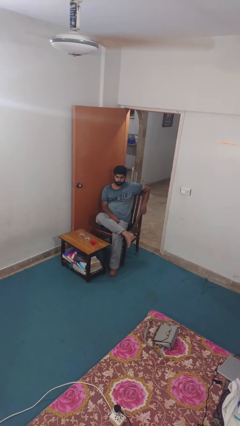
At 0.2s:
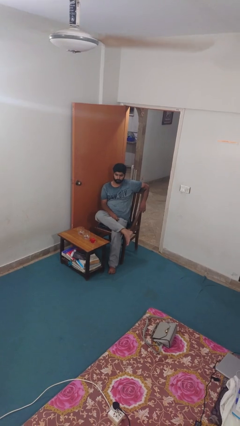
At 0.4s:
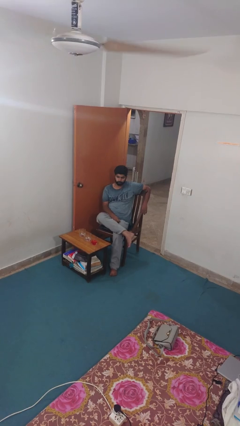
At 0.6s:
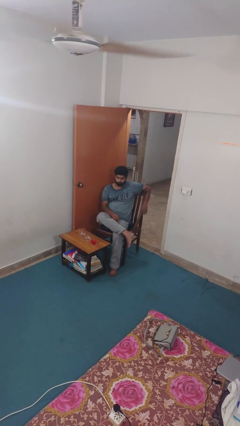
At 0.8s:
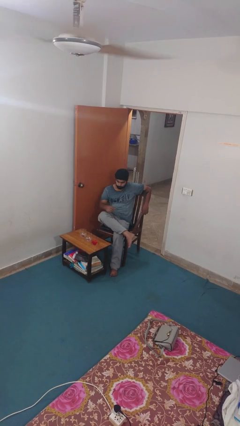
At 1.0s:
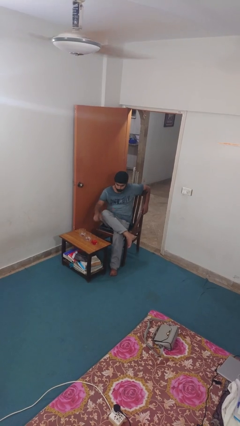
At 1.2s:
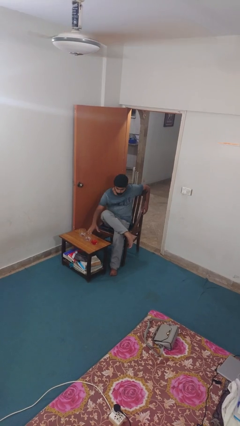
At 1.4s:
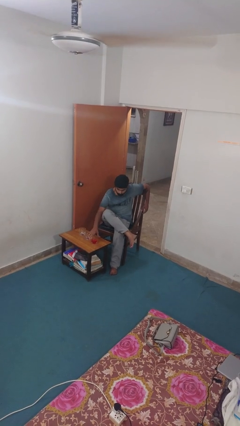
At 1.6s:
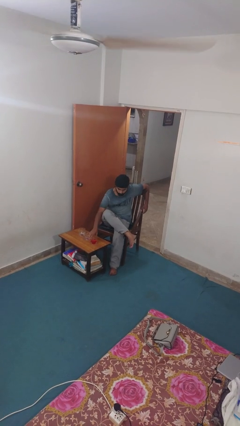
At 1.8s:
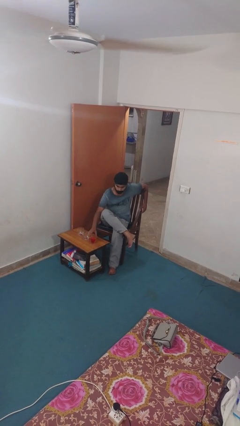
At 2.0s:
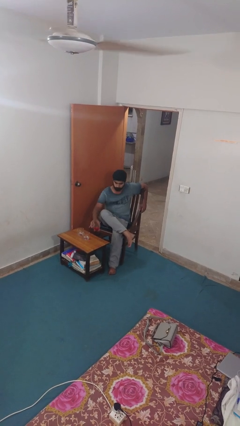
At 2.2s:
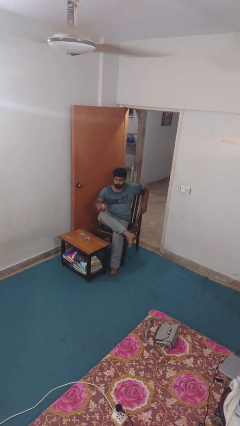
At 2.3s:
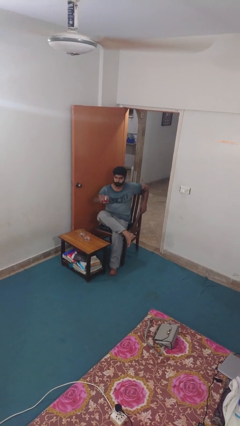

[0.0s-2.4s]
person picks up object from table

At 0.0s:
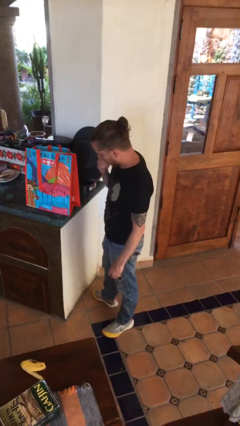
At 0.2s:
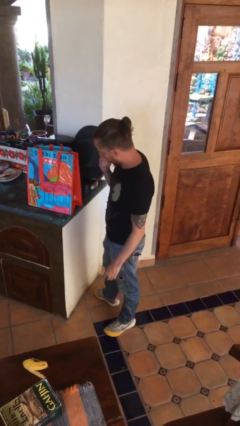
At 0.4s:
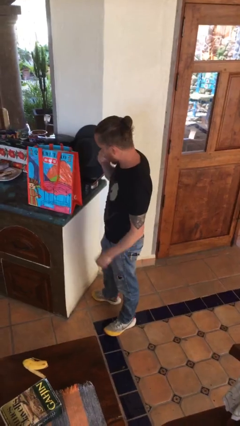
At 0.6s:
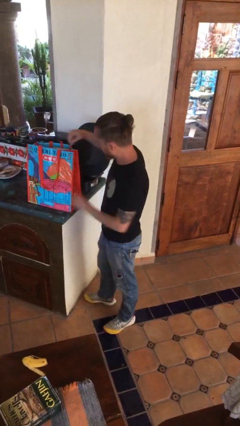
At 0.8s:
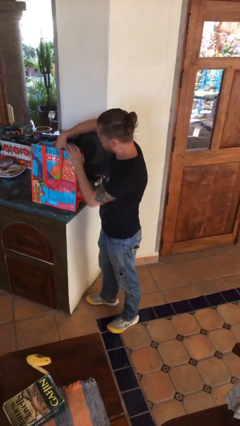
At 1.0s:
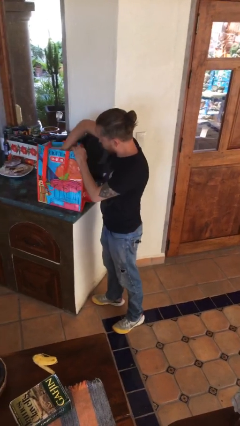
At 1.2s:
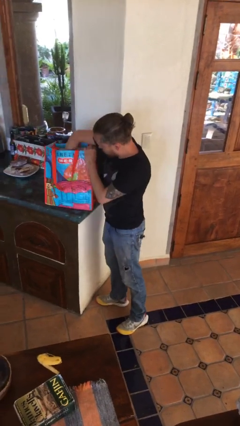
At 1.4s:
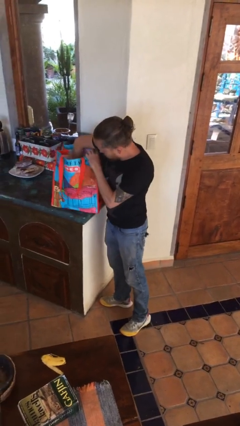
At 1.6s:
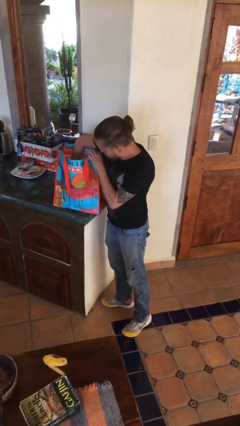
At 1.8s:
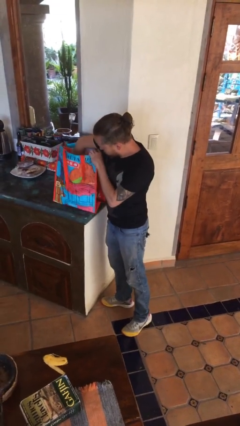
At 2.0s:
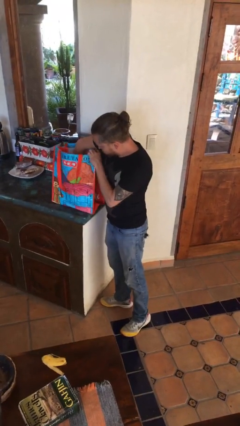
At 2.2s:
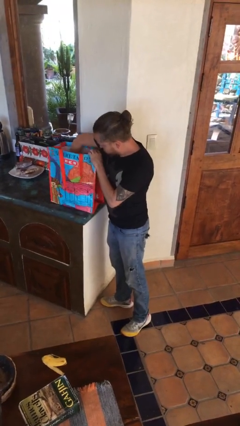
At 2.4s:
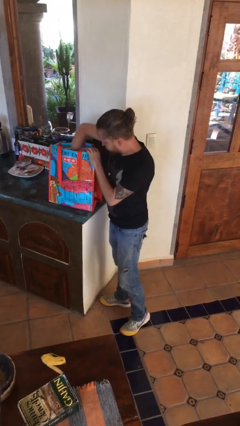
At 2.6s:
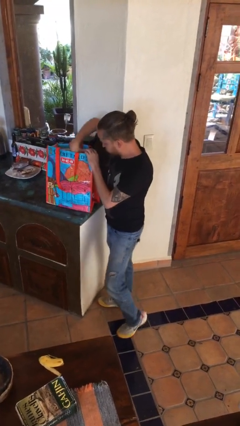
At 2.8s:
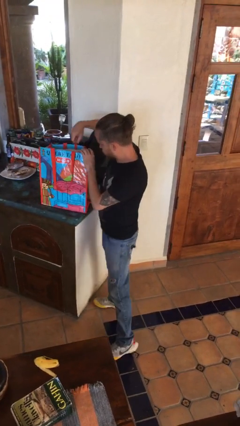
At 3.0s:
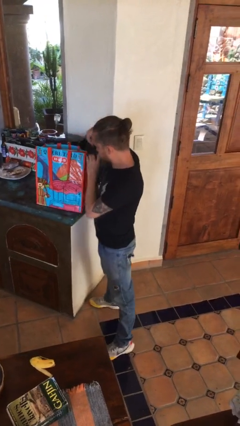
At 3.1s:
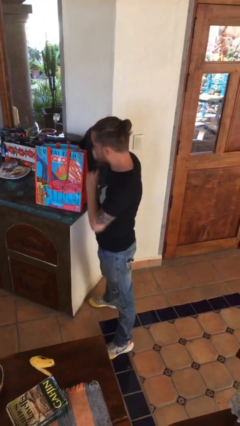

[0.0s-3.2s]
person searches in bag

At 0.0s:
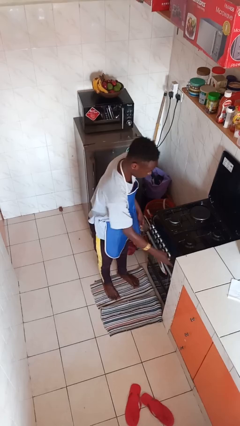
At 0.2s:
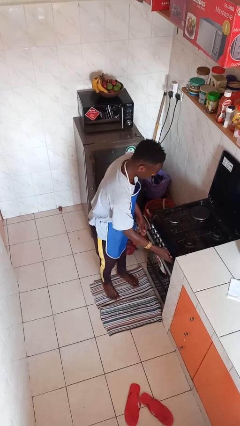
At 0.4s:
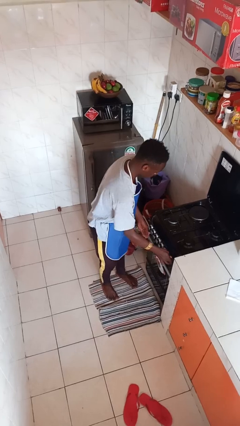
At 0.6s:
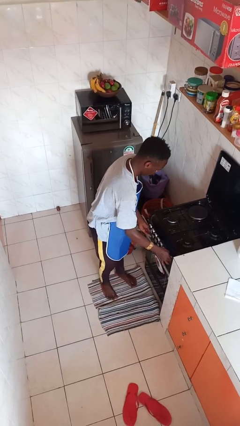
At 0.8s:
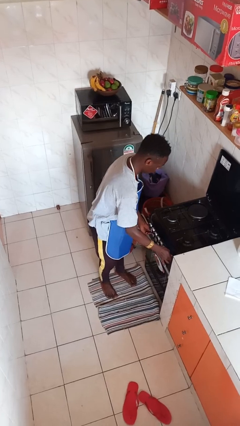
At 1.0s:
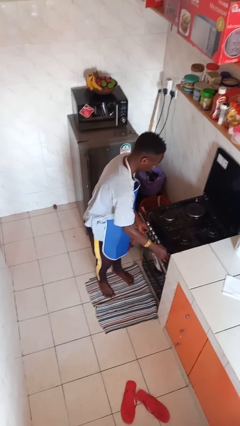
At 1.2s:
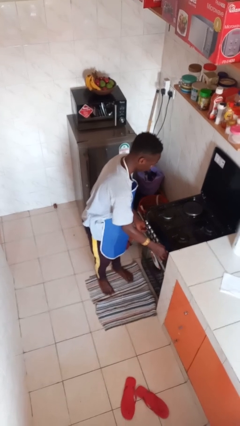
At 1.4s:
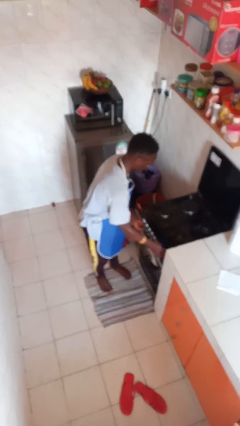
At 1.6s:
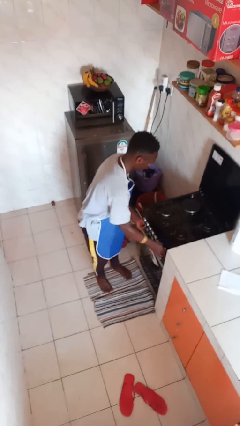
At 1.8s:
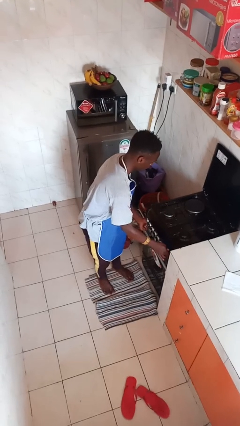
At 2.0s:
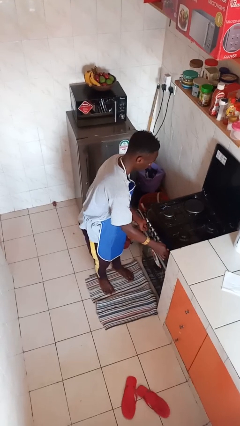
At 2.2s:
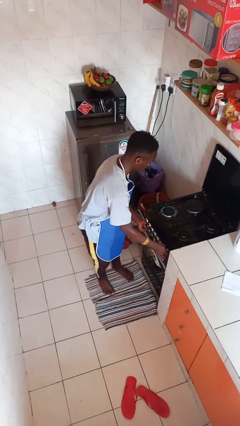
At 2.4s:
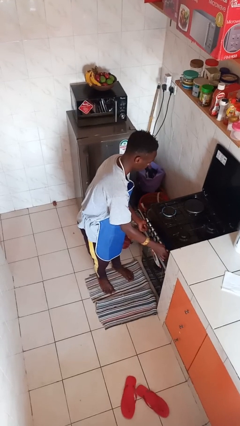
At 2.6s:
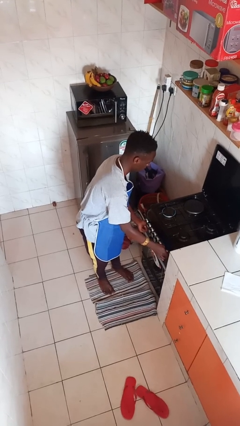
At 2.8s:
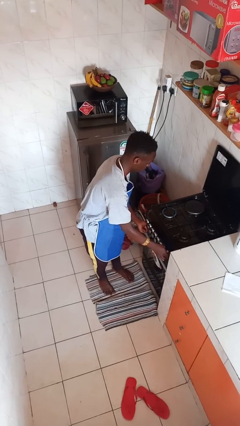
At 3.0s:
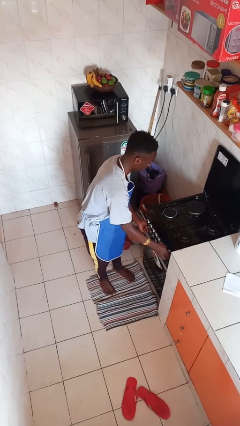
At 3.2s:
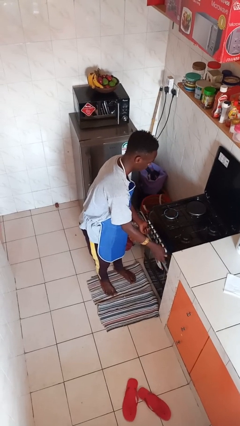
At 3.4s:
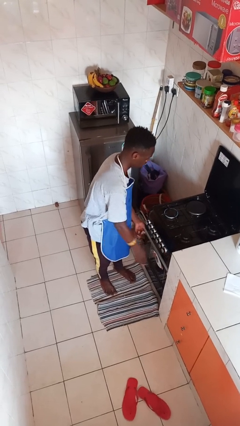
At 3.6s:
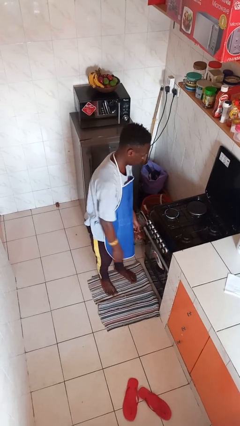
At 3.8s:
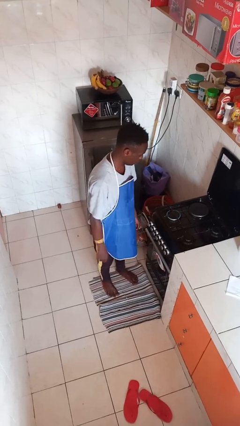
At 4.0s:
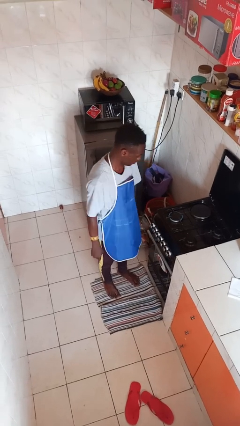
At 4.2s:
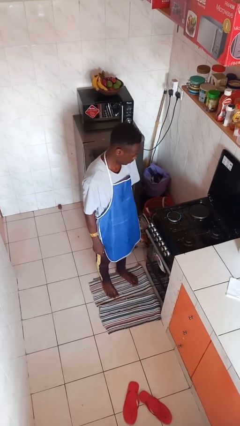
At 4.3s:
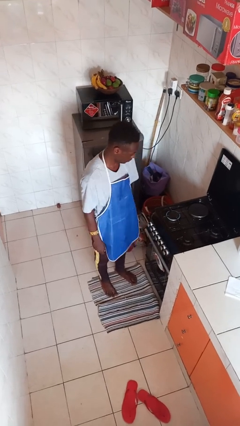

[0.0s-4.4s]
person turns on stovetop

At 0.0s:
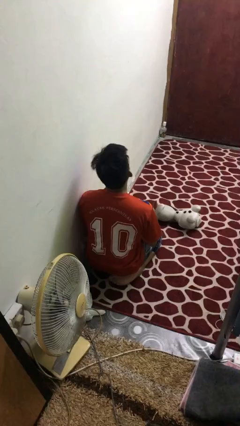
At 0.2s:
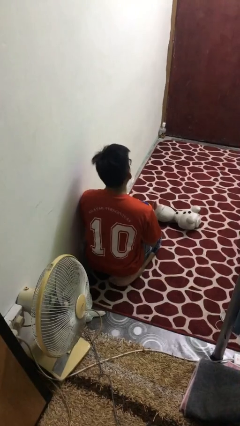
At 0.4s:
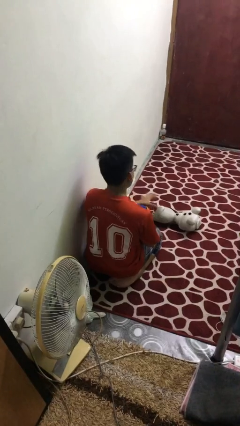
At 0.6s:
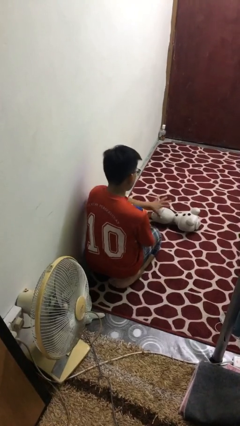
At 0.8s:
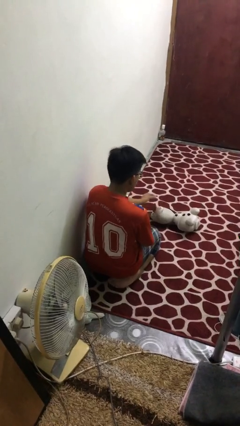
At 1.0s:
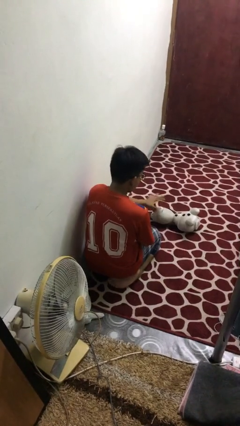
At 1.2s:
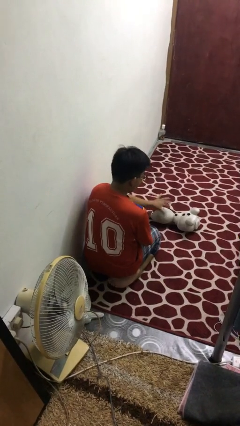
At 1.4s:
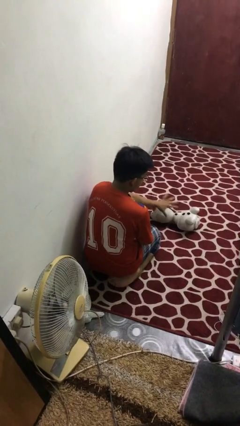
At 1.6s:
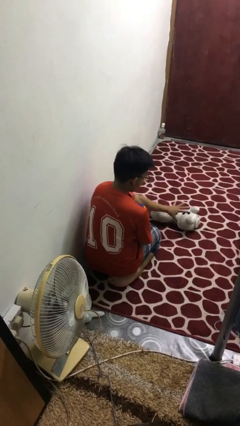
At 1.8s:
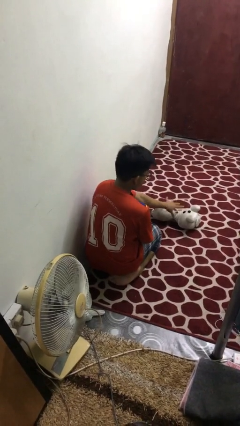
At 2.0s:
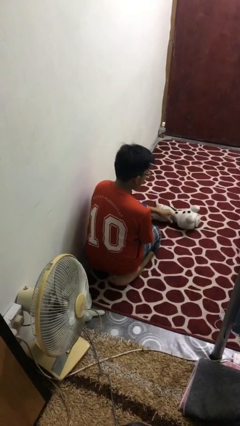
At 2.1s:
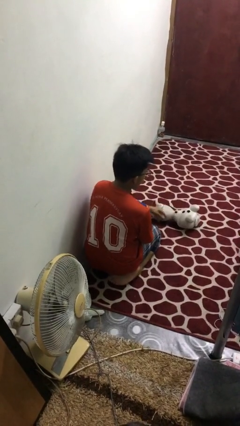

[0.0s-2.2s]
person waves hand over object

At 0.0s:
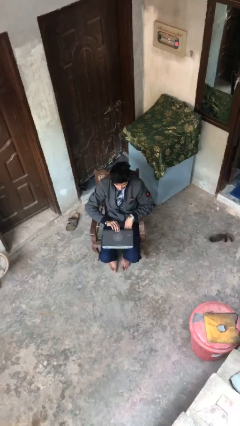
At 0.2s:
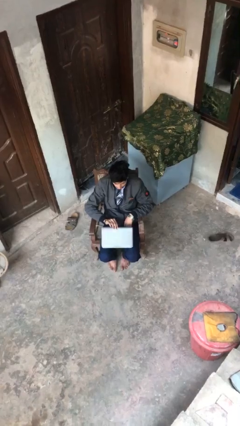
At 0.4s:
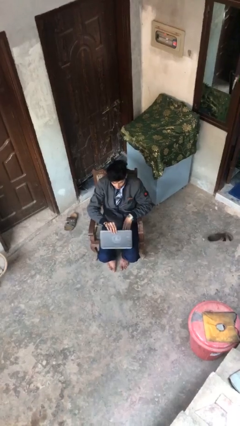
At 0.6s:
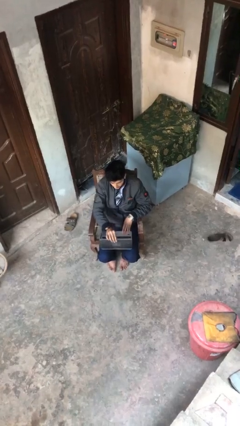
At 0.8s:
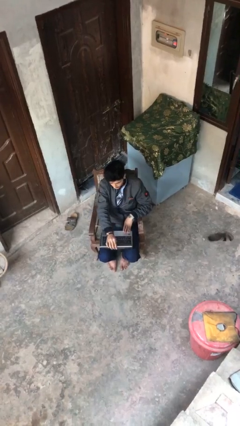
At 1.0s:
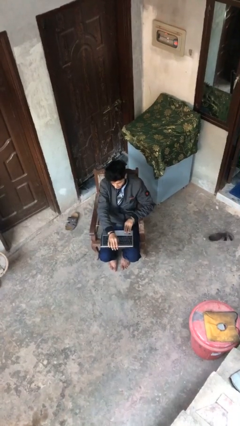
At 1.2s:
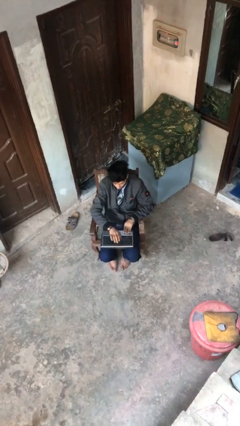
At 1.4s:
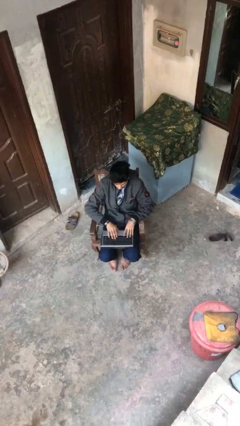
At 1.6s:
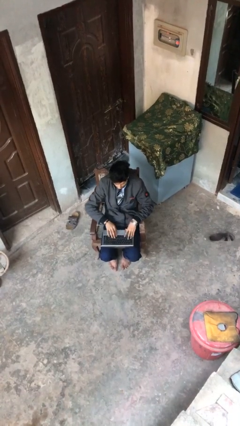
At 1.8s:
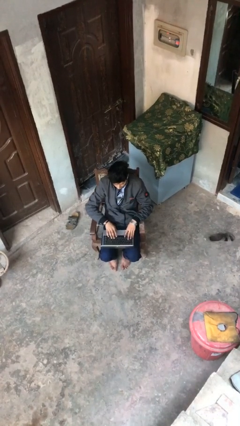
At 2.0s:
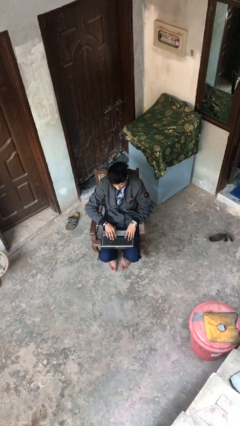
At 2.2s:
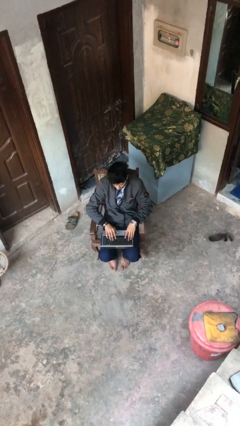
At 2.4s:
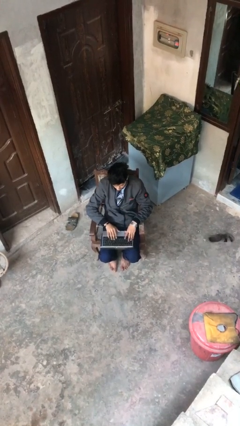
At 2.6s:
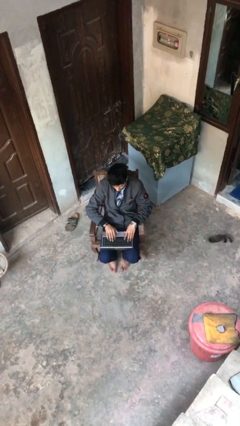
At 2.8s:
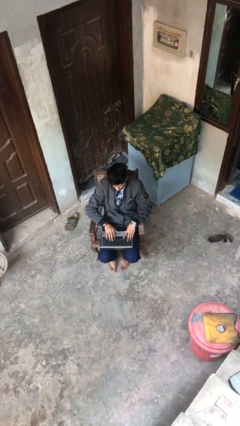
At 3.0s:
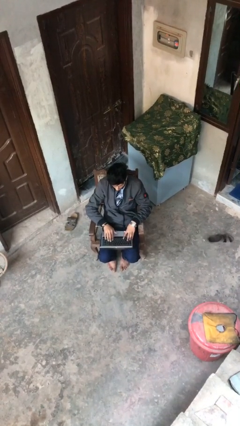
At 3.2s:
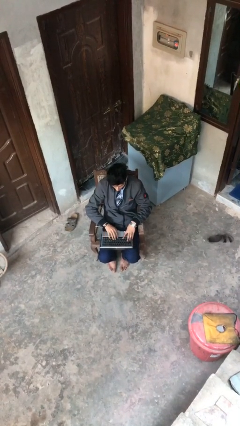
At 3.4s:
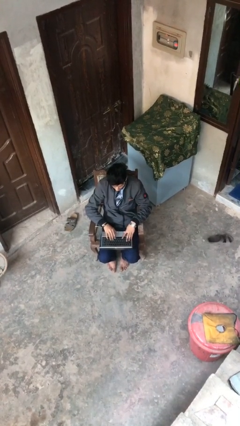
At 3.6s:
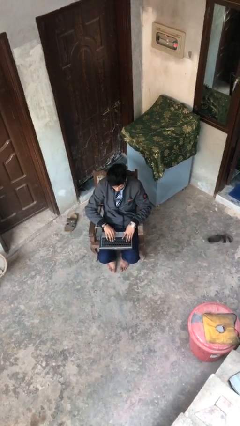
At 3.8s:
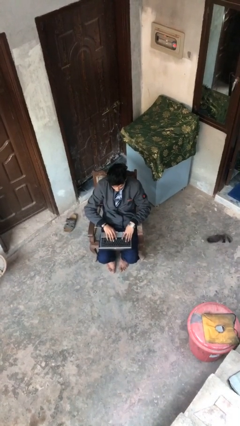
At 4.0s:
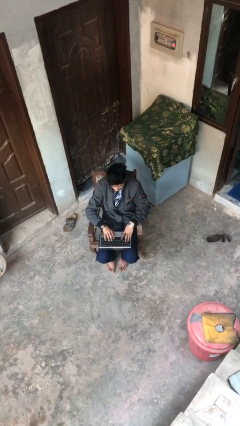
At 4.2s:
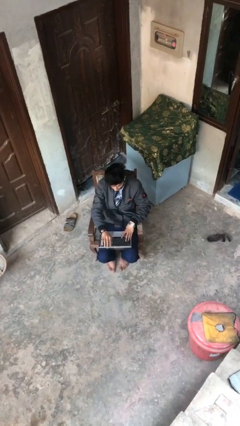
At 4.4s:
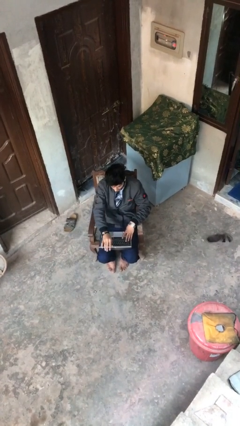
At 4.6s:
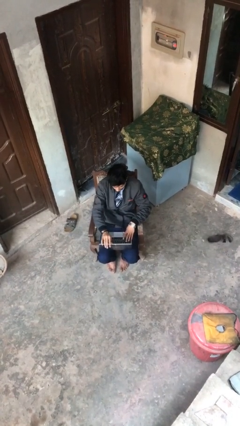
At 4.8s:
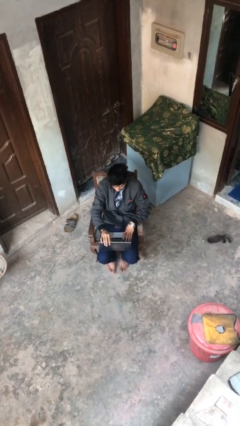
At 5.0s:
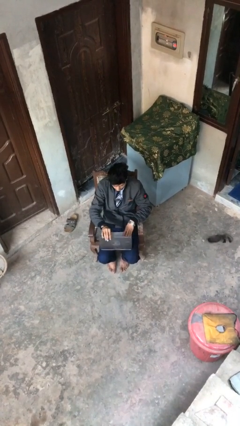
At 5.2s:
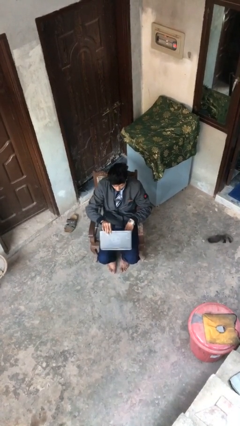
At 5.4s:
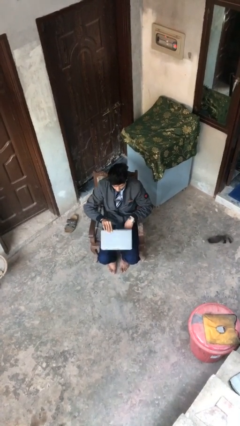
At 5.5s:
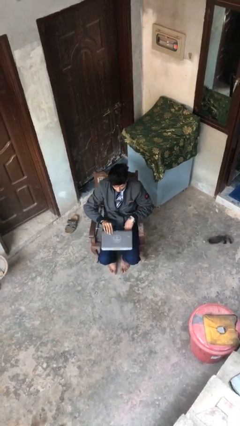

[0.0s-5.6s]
person interacts with laptop

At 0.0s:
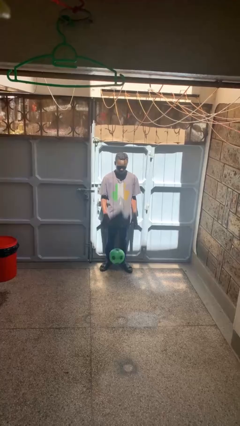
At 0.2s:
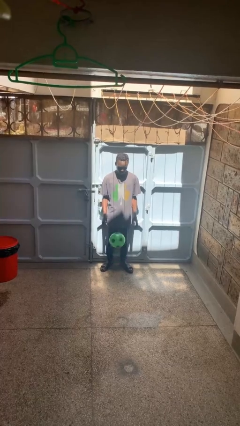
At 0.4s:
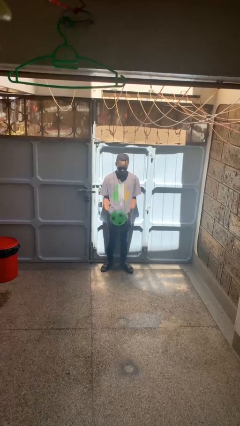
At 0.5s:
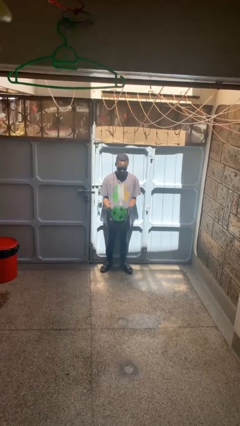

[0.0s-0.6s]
person bounces ball on floor
